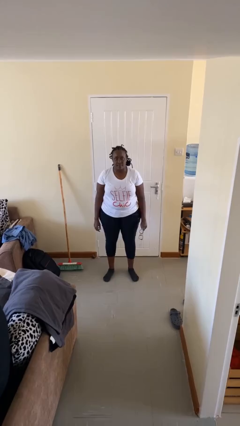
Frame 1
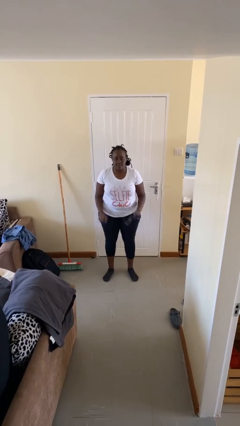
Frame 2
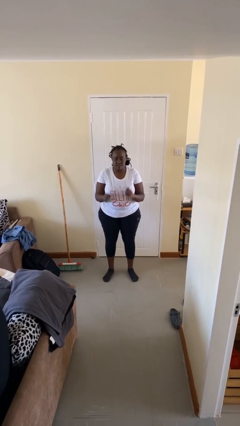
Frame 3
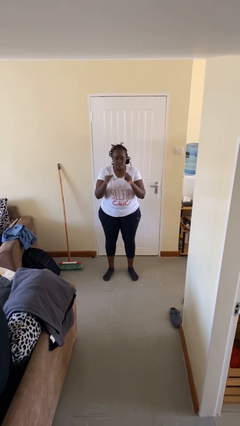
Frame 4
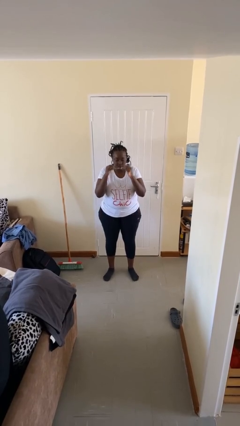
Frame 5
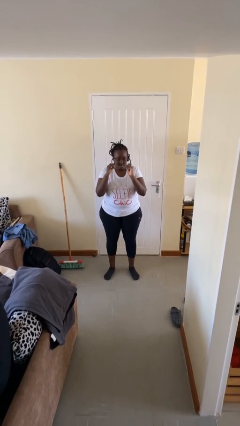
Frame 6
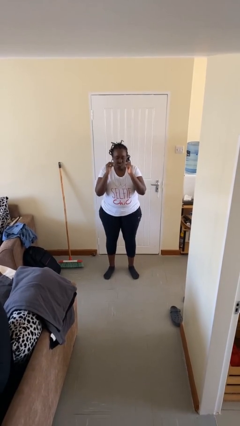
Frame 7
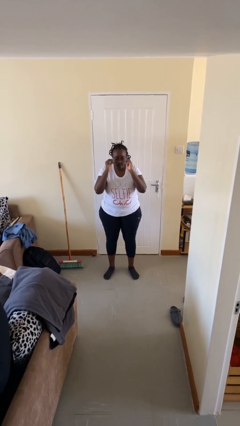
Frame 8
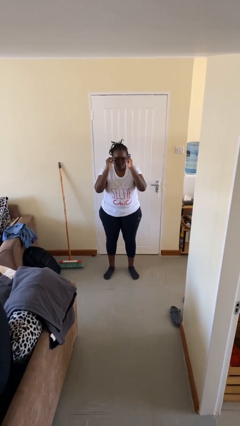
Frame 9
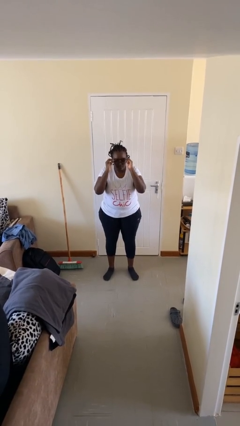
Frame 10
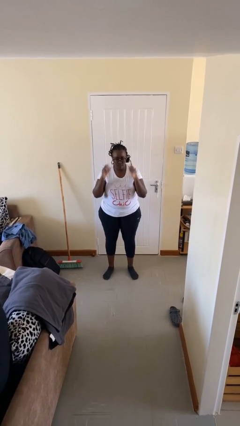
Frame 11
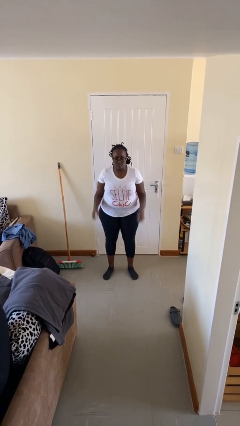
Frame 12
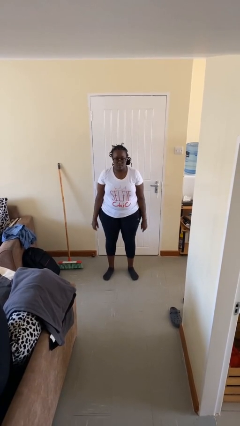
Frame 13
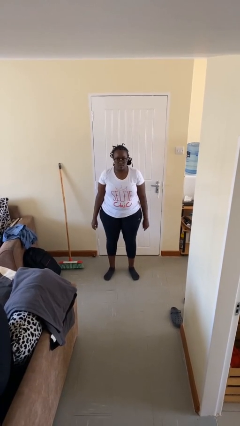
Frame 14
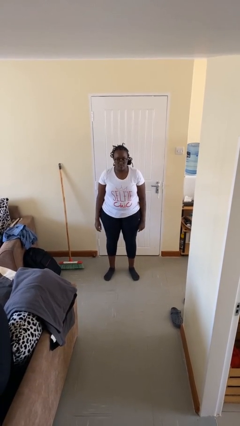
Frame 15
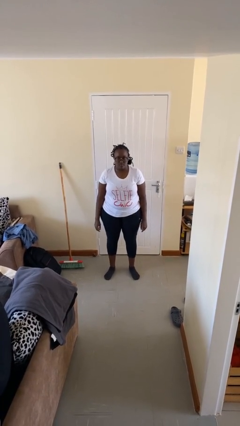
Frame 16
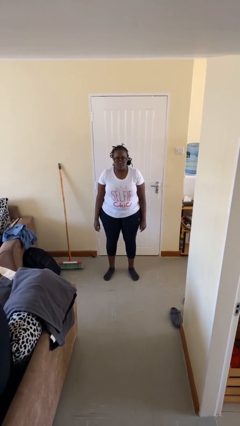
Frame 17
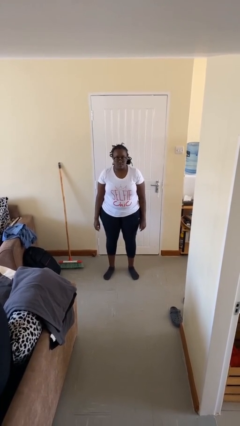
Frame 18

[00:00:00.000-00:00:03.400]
person puts on glasses

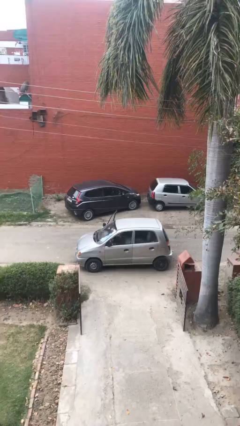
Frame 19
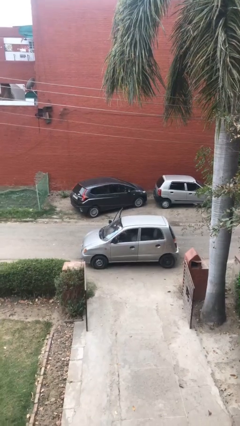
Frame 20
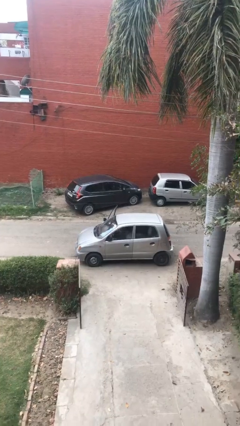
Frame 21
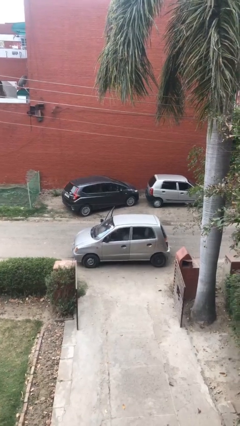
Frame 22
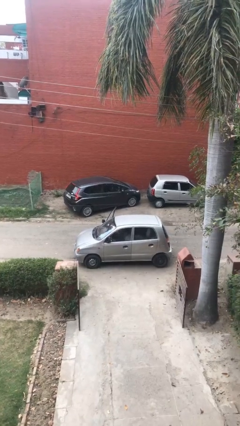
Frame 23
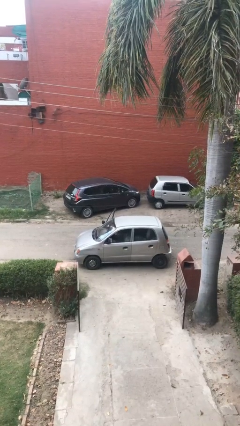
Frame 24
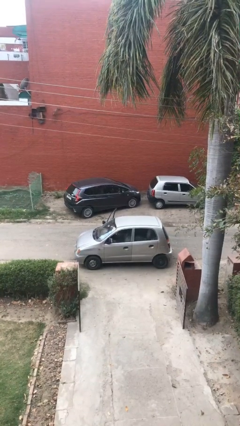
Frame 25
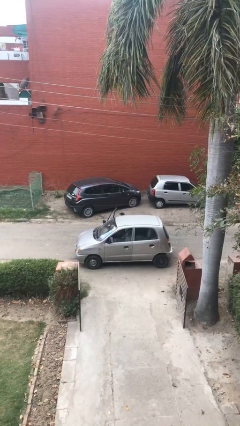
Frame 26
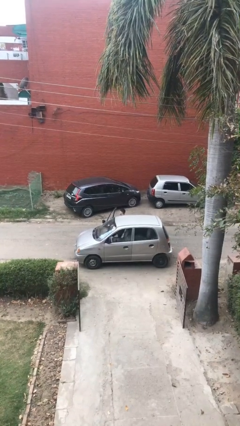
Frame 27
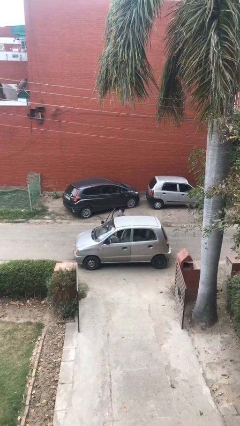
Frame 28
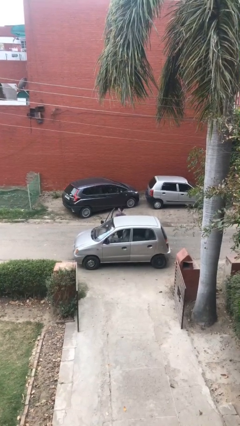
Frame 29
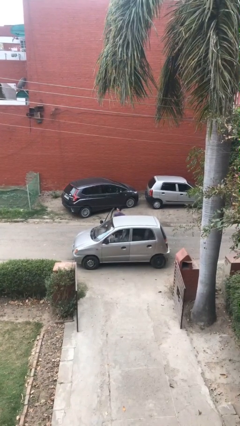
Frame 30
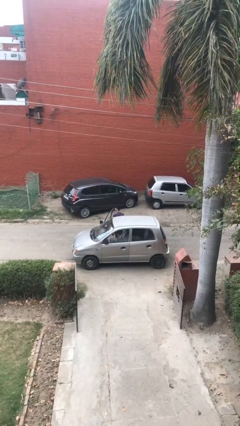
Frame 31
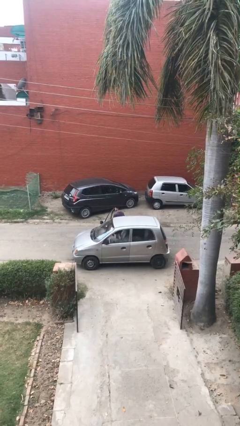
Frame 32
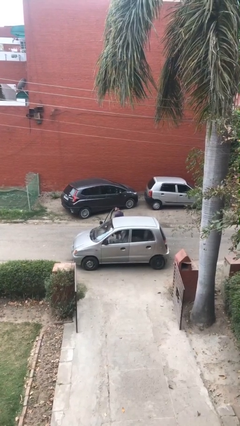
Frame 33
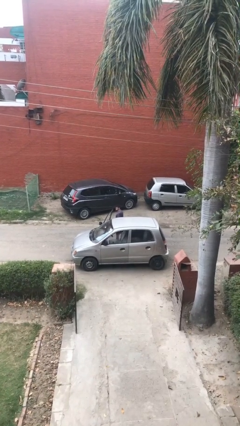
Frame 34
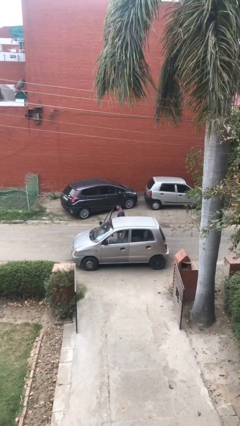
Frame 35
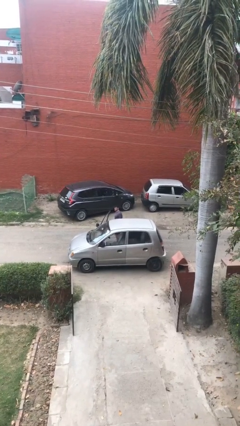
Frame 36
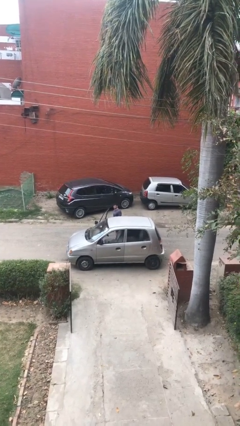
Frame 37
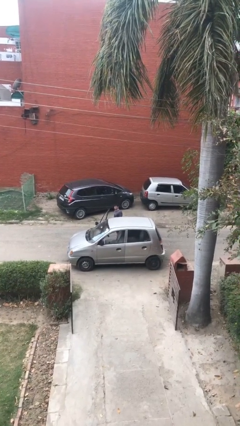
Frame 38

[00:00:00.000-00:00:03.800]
person exits car

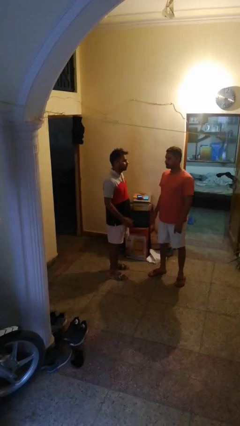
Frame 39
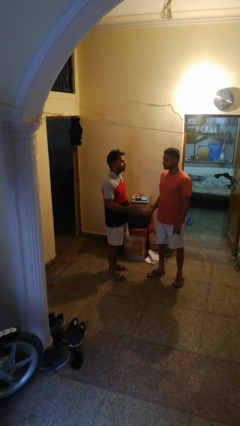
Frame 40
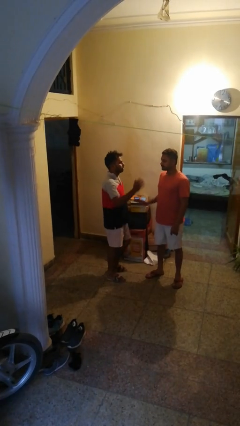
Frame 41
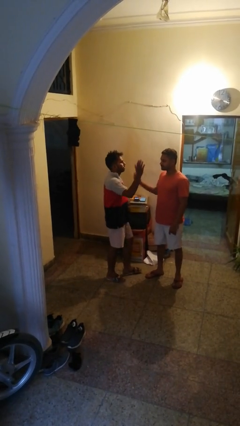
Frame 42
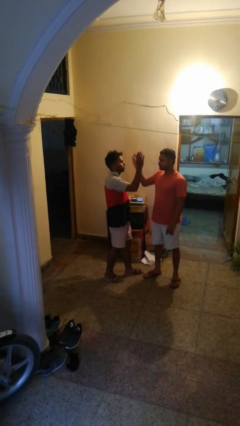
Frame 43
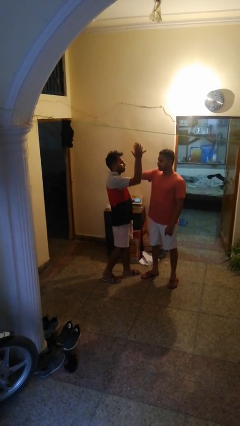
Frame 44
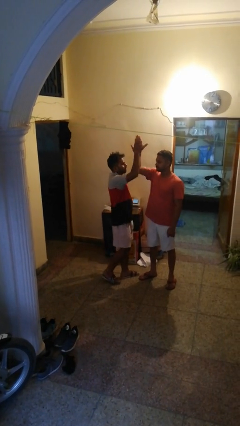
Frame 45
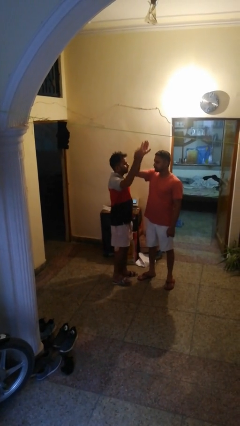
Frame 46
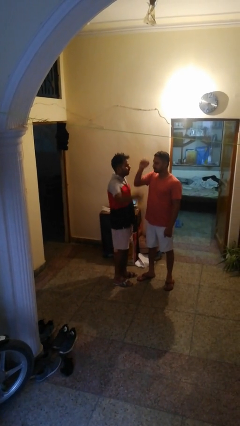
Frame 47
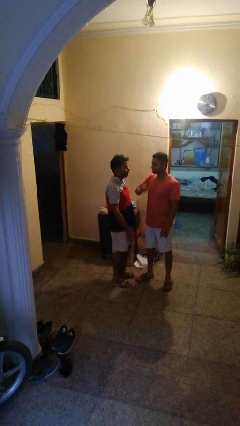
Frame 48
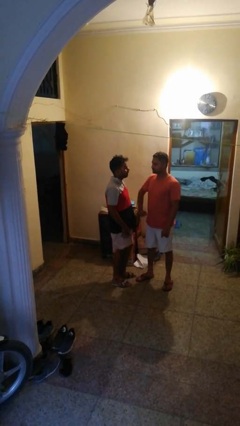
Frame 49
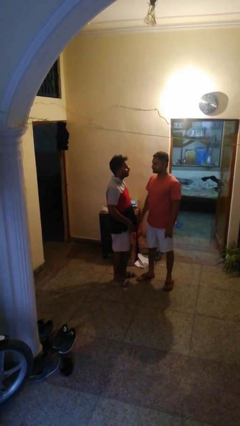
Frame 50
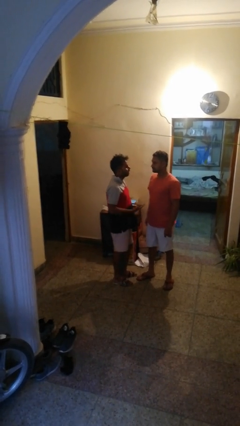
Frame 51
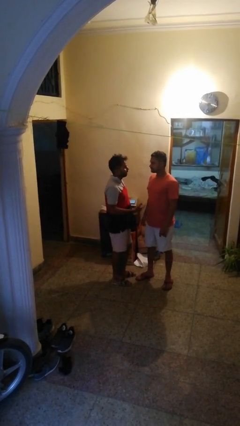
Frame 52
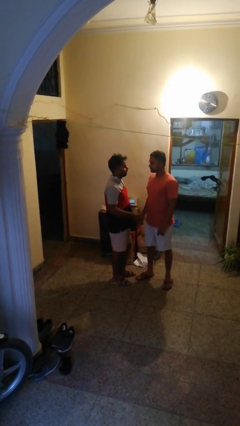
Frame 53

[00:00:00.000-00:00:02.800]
person highfives hand

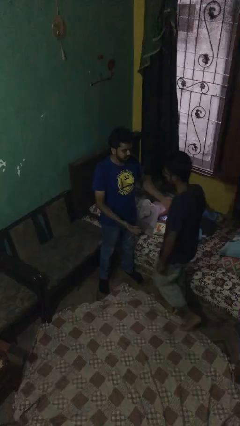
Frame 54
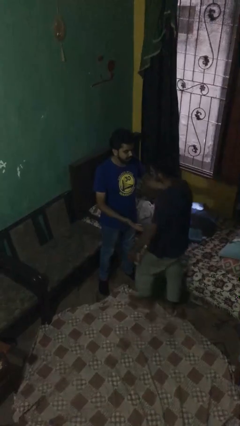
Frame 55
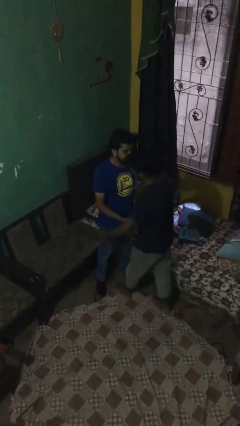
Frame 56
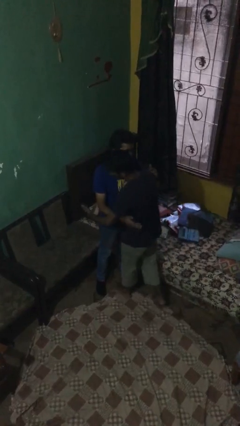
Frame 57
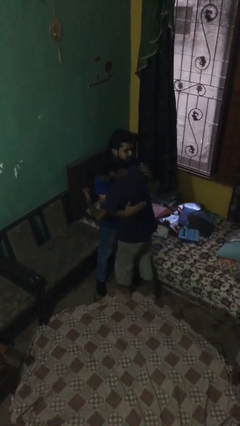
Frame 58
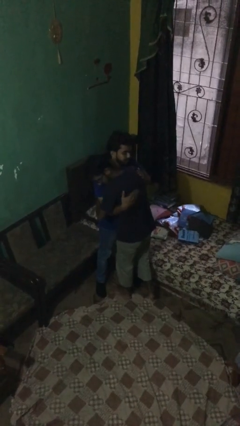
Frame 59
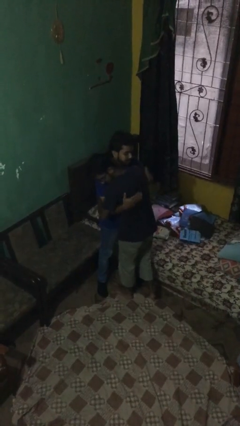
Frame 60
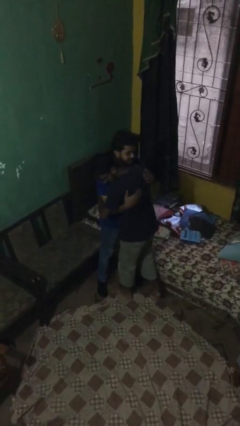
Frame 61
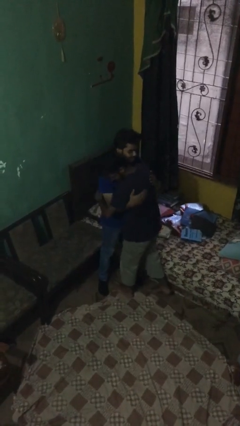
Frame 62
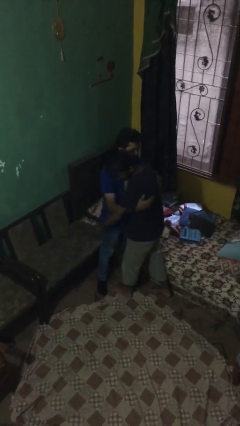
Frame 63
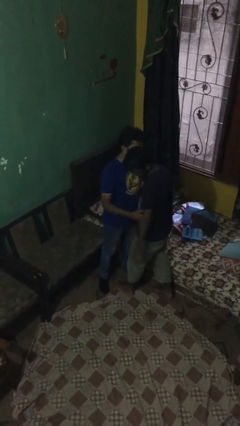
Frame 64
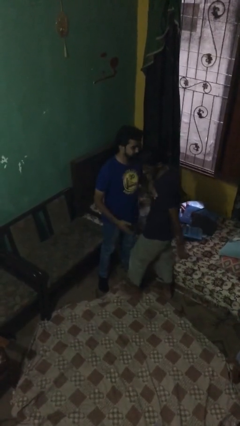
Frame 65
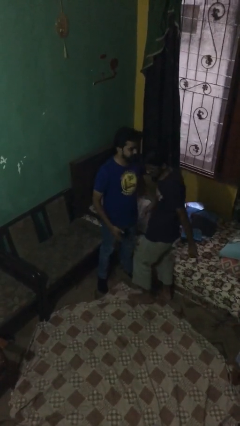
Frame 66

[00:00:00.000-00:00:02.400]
person embraces person

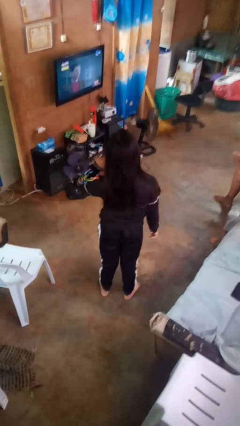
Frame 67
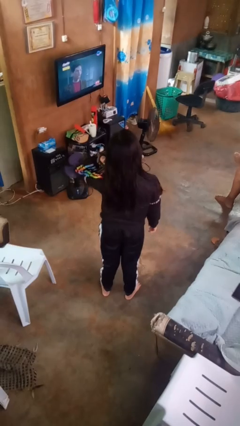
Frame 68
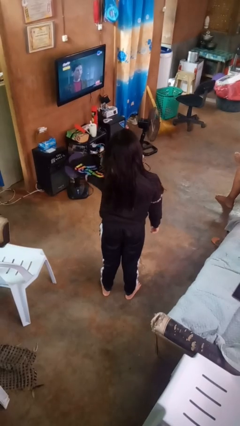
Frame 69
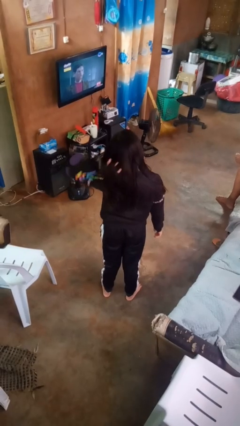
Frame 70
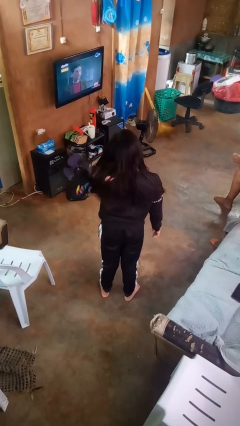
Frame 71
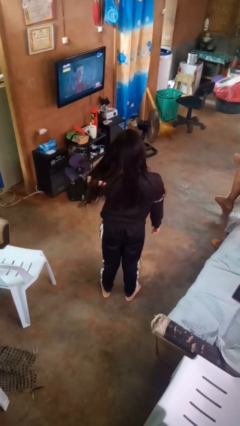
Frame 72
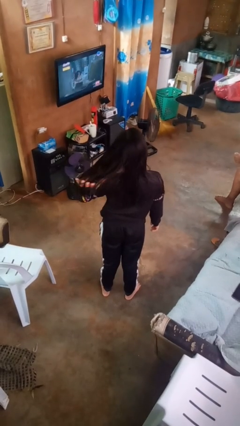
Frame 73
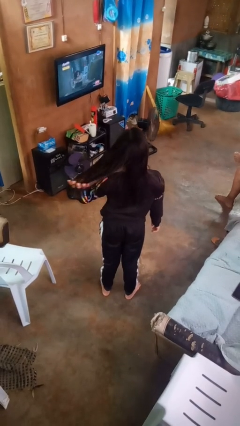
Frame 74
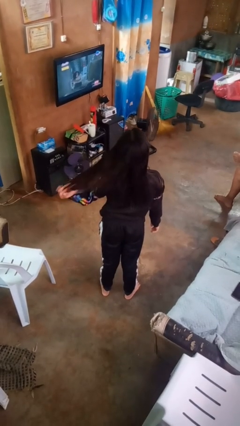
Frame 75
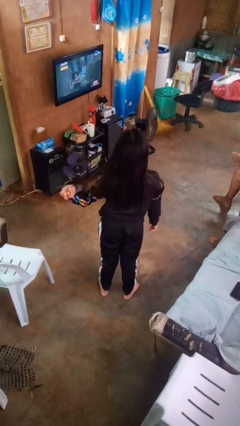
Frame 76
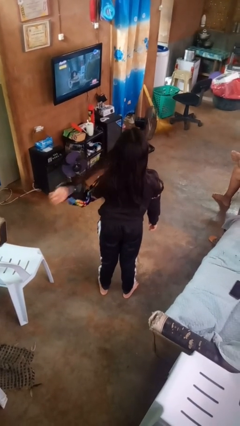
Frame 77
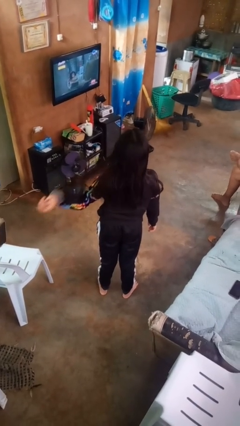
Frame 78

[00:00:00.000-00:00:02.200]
person strokes hair

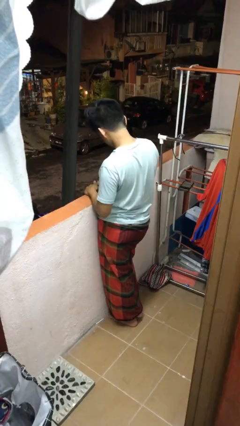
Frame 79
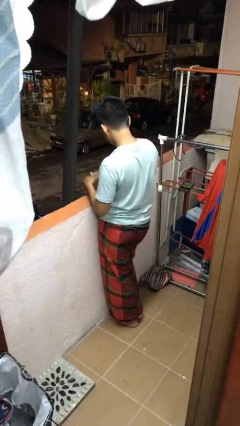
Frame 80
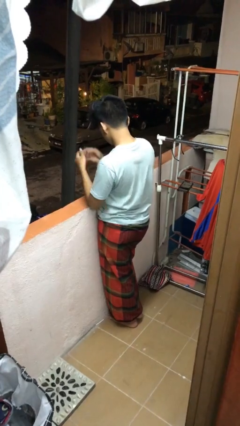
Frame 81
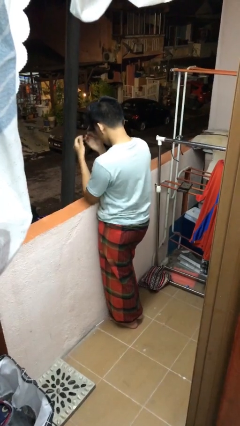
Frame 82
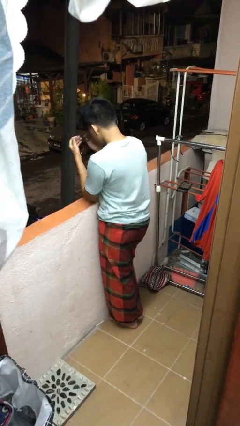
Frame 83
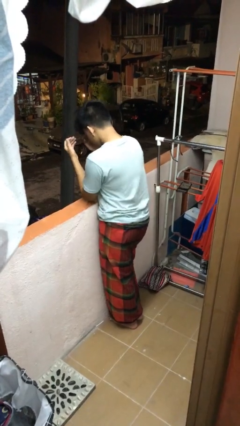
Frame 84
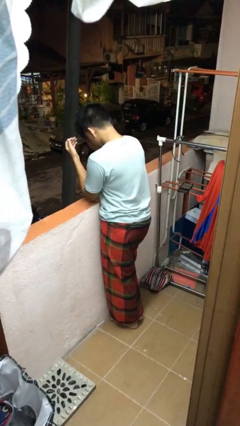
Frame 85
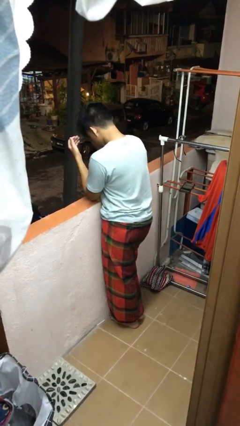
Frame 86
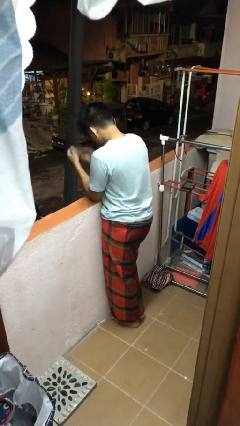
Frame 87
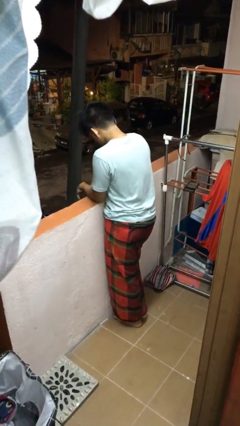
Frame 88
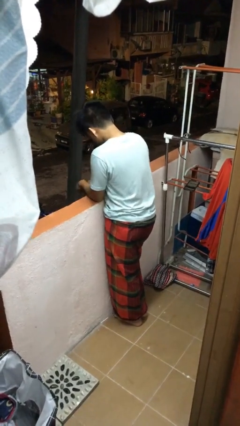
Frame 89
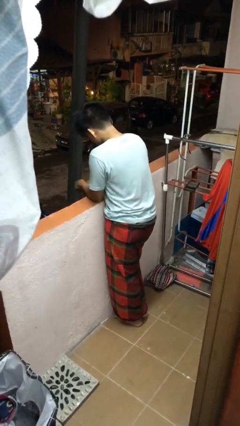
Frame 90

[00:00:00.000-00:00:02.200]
person prays

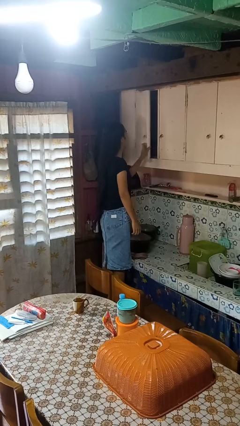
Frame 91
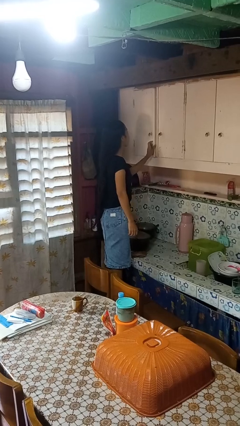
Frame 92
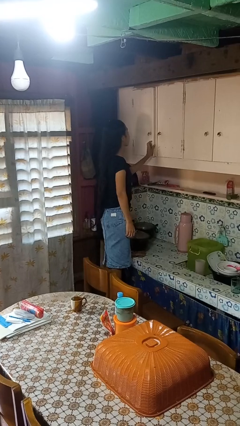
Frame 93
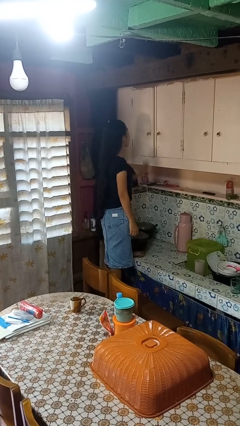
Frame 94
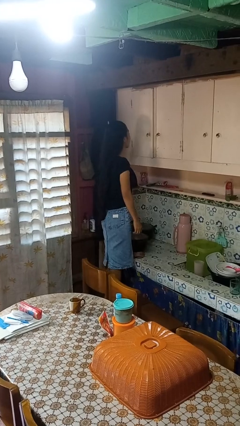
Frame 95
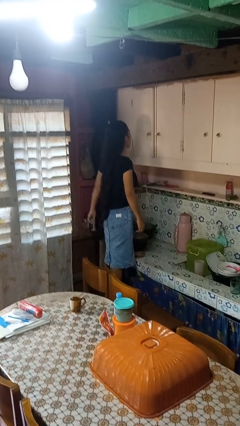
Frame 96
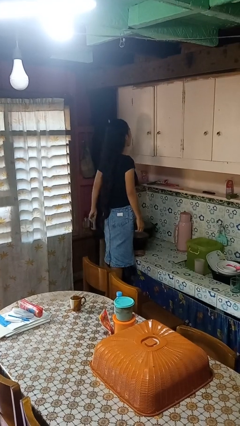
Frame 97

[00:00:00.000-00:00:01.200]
person closes cabinet
